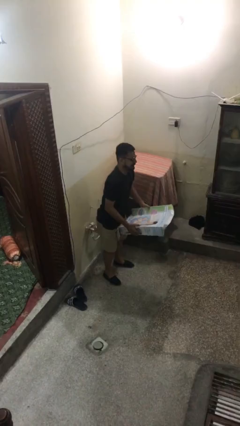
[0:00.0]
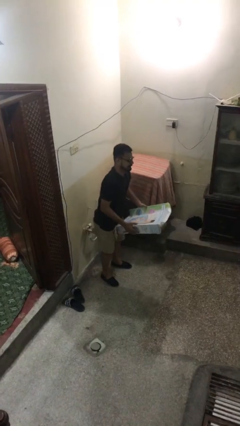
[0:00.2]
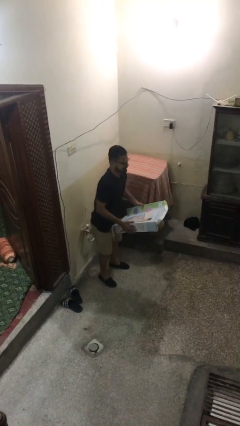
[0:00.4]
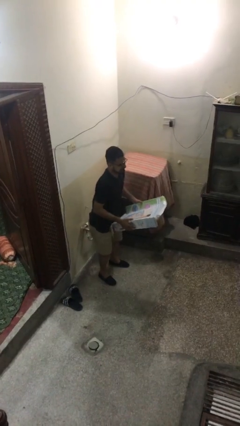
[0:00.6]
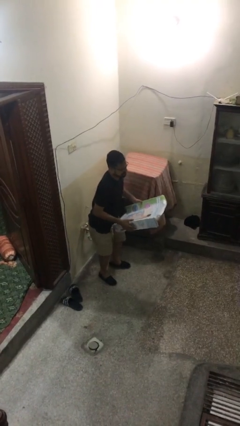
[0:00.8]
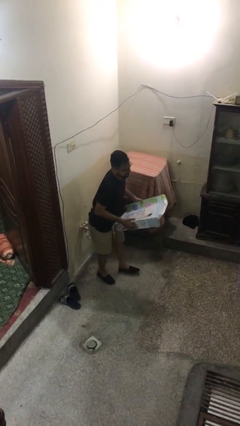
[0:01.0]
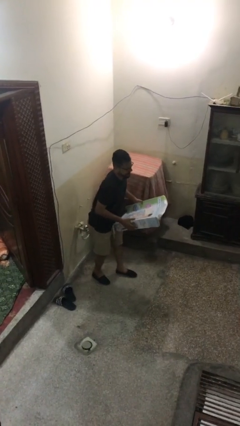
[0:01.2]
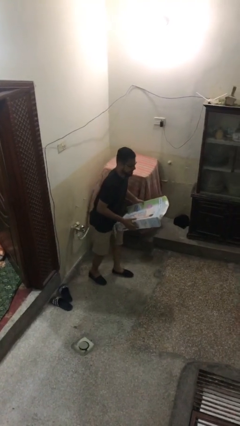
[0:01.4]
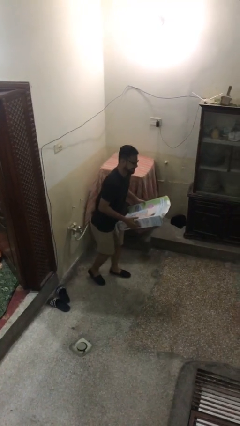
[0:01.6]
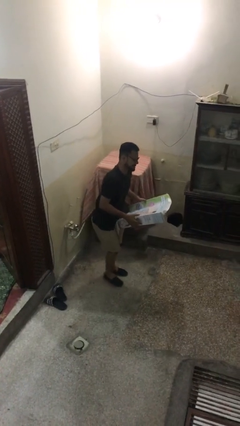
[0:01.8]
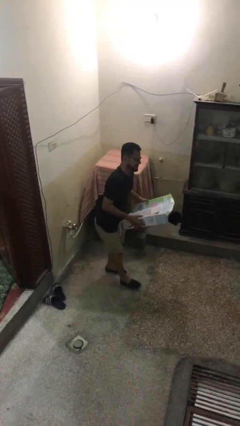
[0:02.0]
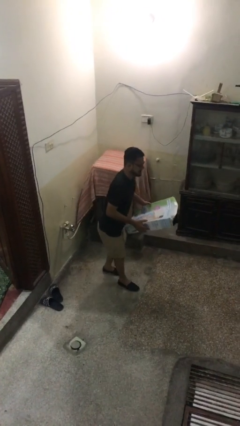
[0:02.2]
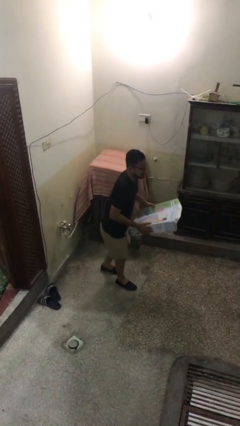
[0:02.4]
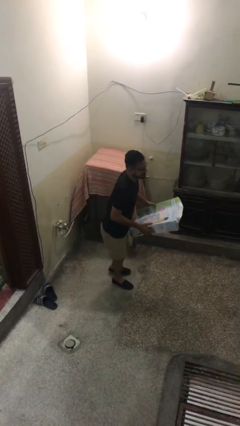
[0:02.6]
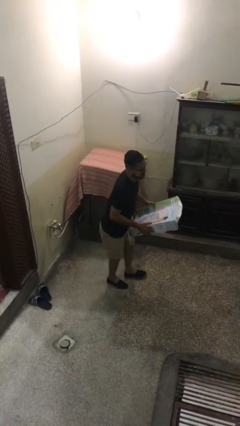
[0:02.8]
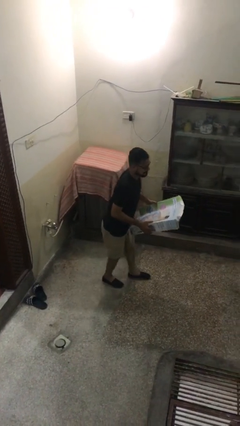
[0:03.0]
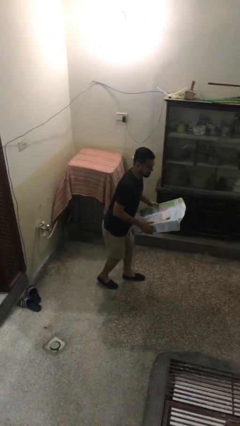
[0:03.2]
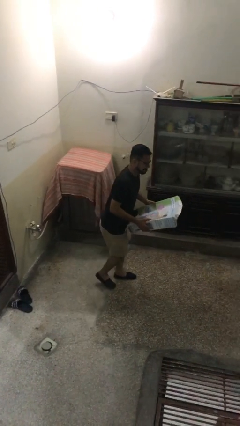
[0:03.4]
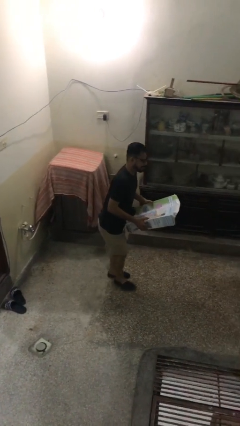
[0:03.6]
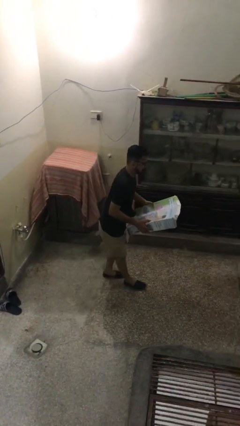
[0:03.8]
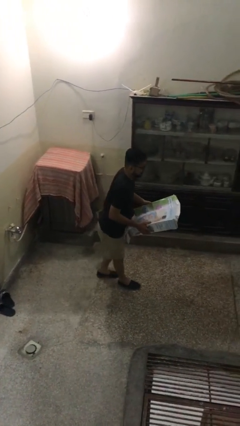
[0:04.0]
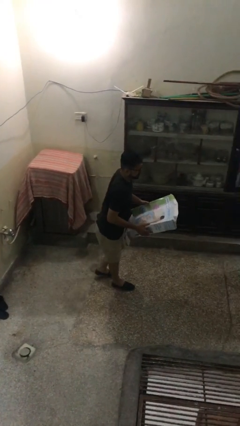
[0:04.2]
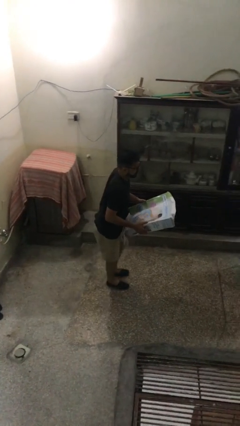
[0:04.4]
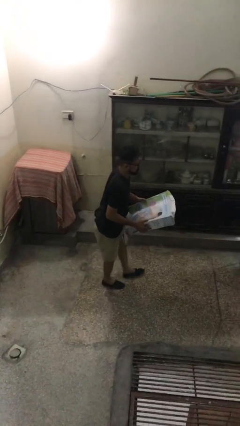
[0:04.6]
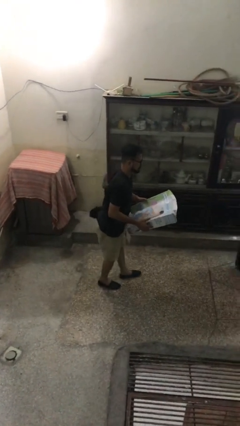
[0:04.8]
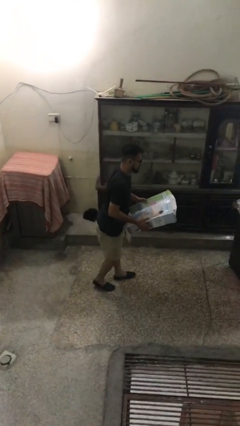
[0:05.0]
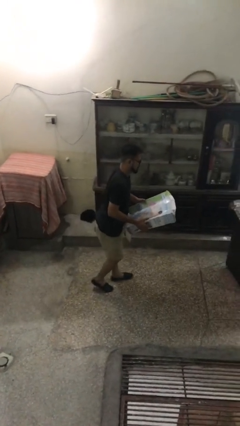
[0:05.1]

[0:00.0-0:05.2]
person carries heavy object

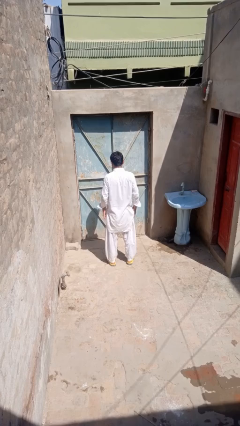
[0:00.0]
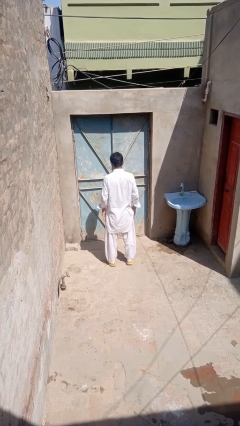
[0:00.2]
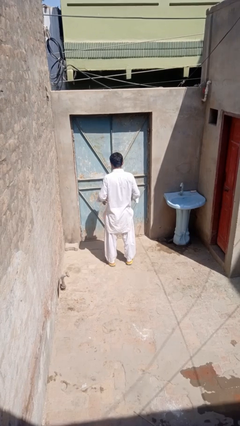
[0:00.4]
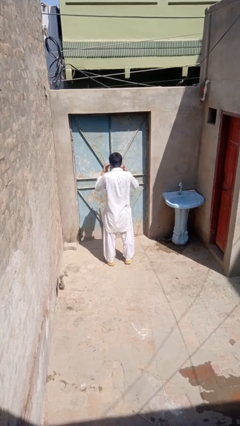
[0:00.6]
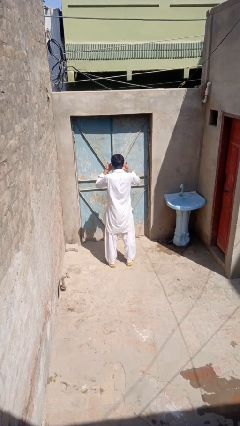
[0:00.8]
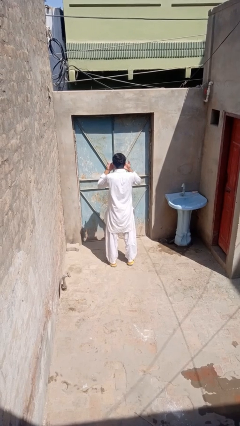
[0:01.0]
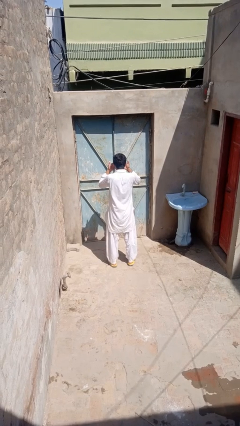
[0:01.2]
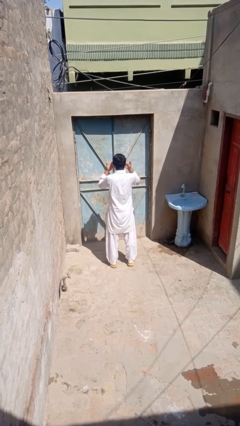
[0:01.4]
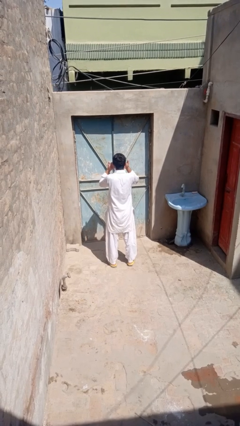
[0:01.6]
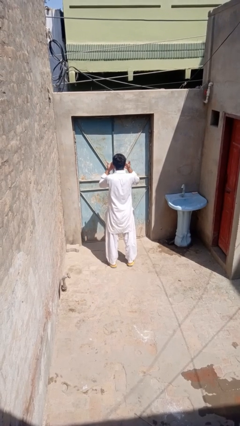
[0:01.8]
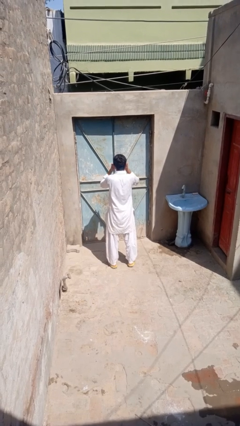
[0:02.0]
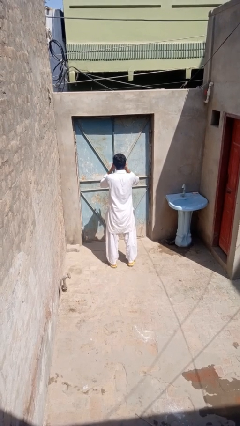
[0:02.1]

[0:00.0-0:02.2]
person rubs eyes

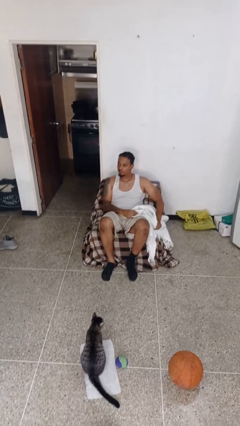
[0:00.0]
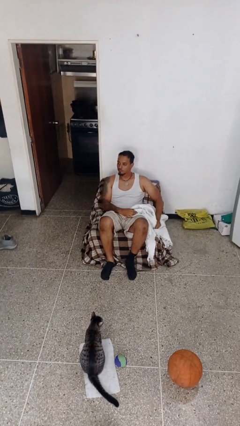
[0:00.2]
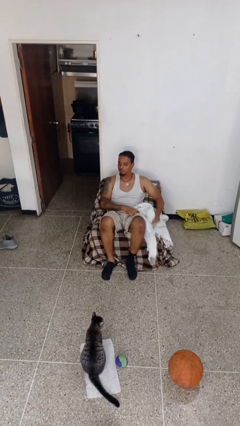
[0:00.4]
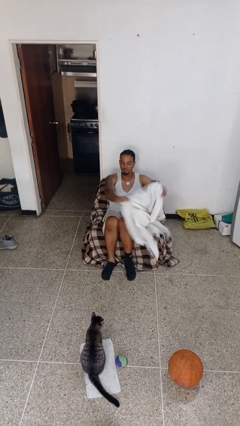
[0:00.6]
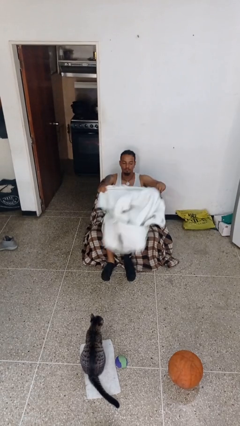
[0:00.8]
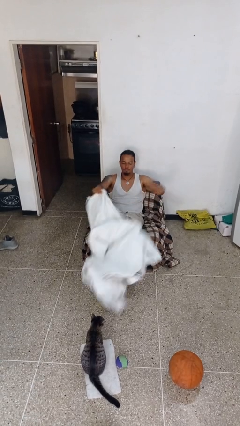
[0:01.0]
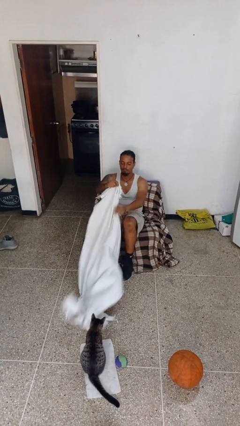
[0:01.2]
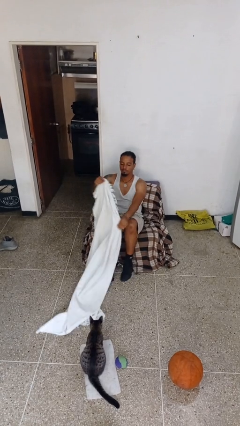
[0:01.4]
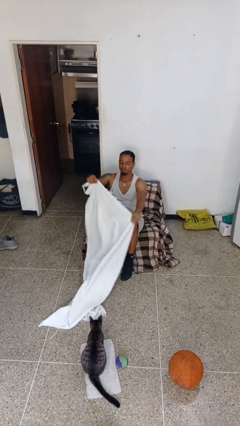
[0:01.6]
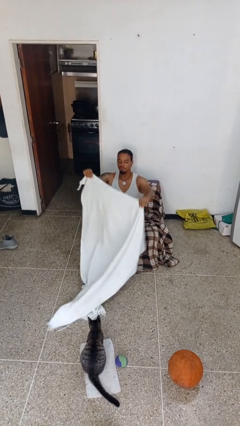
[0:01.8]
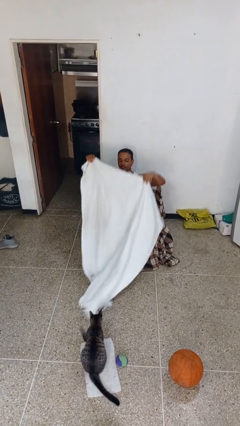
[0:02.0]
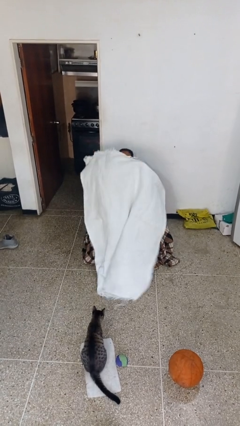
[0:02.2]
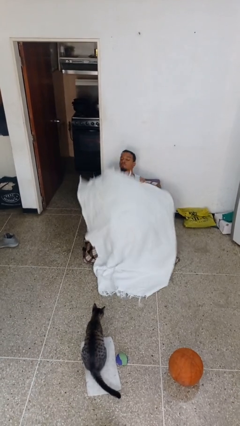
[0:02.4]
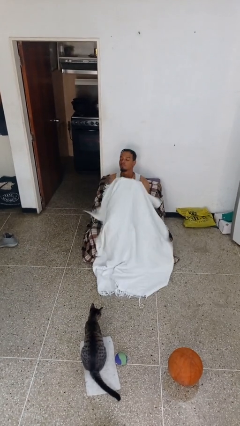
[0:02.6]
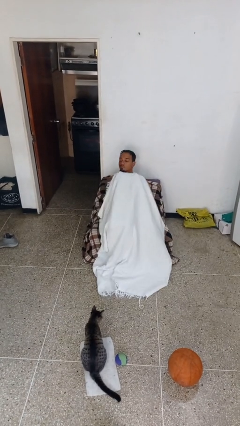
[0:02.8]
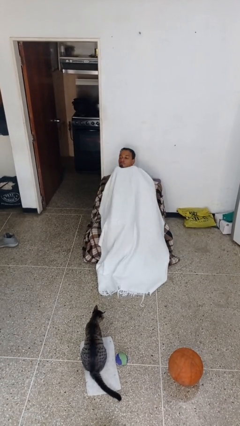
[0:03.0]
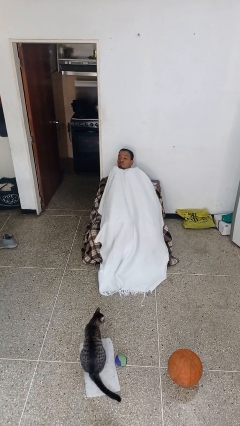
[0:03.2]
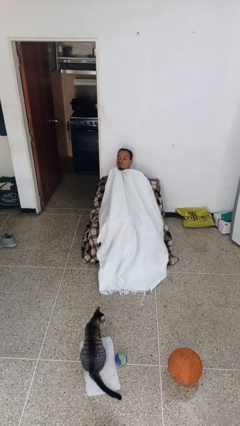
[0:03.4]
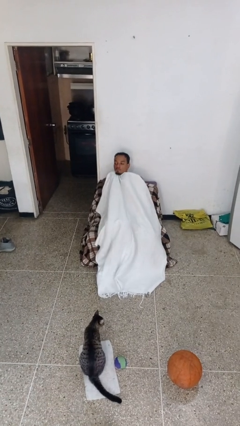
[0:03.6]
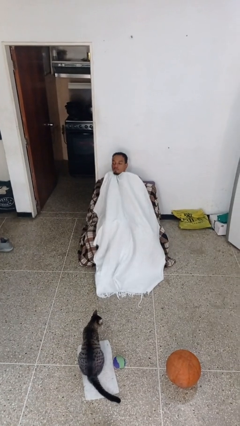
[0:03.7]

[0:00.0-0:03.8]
person covers with blanket

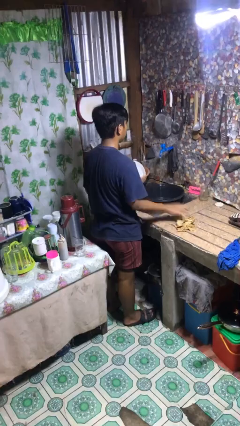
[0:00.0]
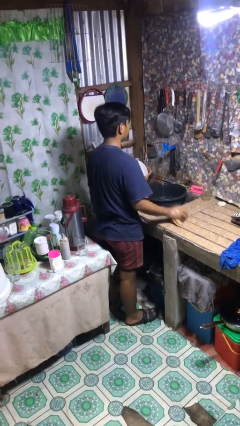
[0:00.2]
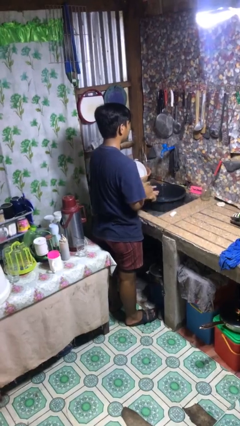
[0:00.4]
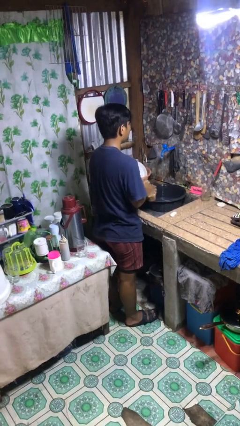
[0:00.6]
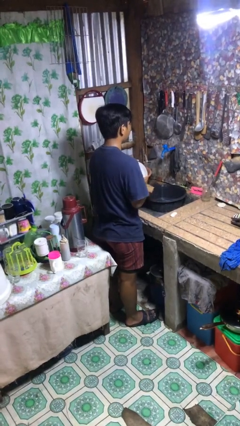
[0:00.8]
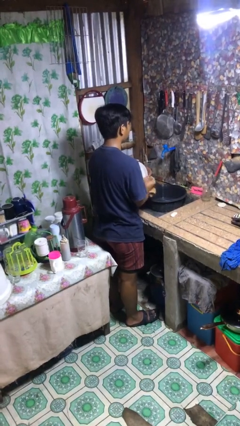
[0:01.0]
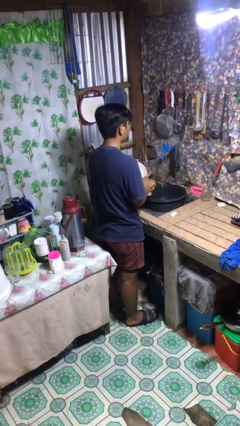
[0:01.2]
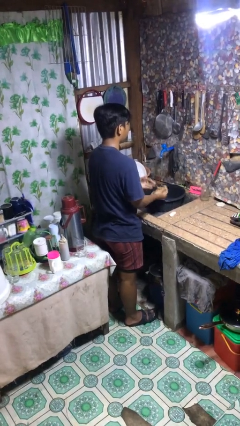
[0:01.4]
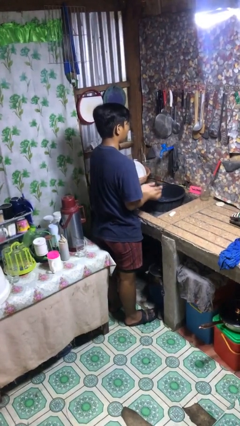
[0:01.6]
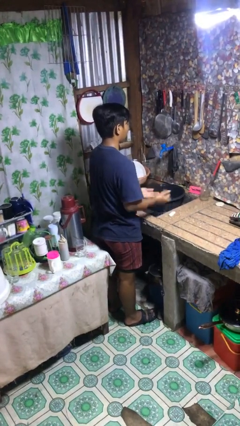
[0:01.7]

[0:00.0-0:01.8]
person dries hands with towel

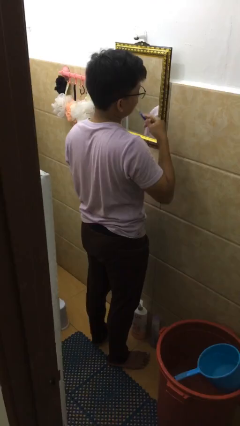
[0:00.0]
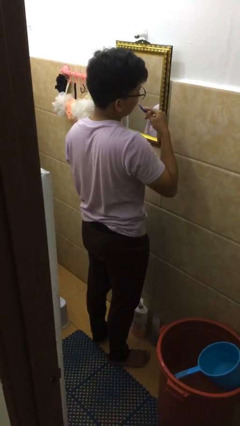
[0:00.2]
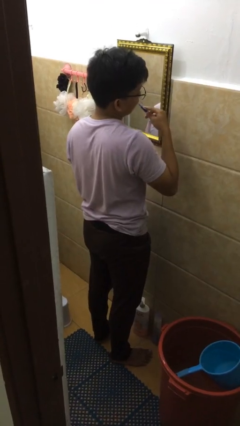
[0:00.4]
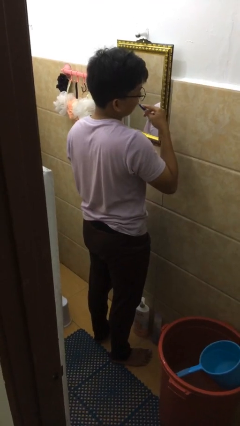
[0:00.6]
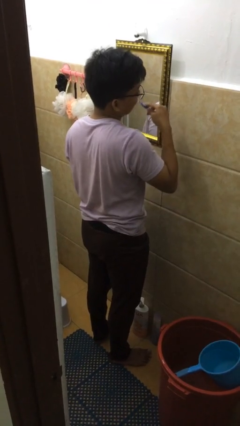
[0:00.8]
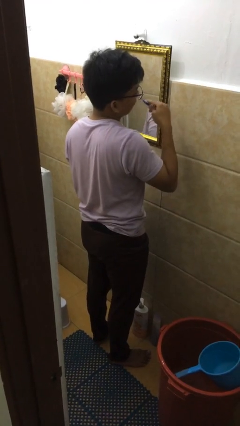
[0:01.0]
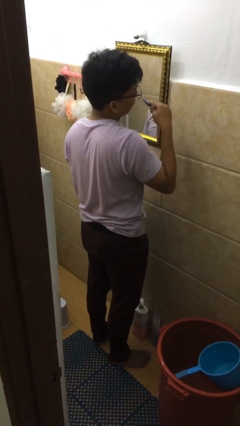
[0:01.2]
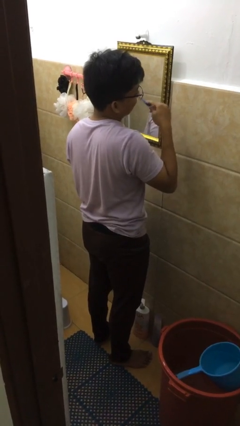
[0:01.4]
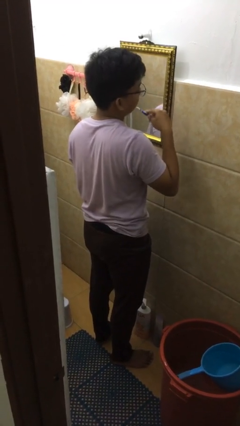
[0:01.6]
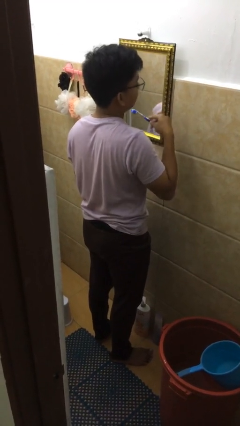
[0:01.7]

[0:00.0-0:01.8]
person brushes teeth

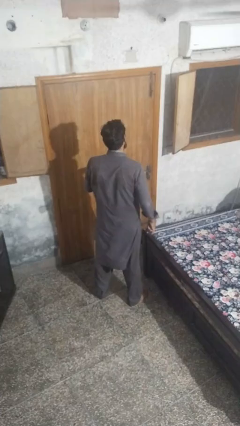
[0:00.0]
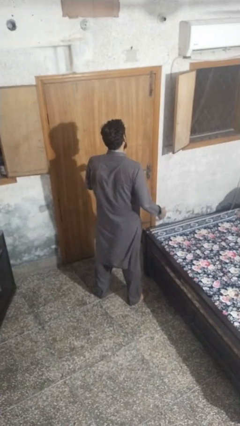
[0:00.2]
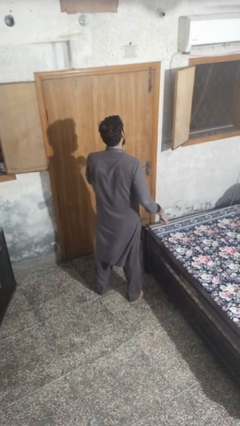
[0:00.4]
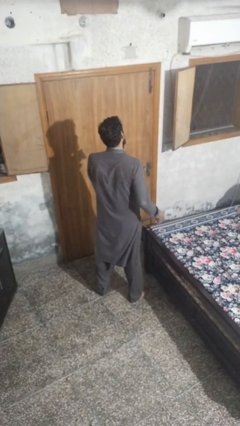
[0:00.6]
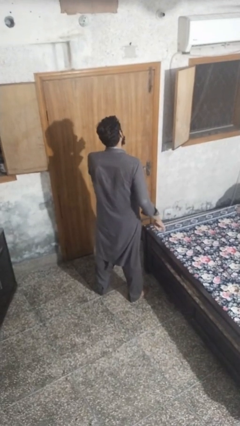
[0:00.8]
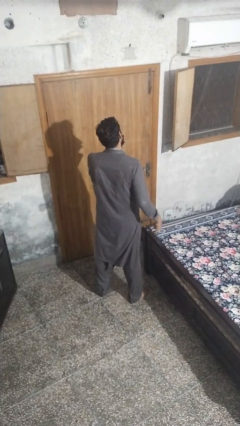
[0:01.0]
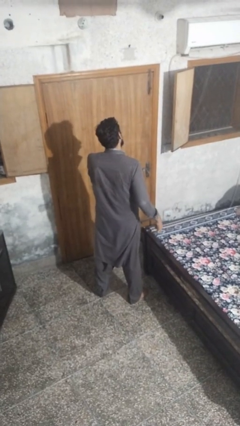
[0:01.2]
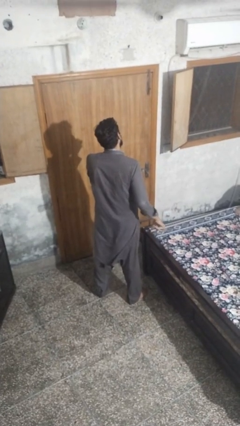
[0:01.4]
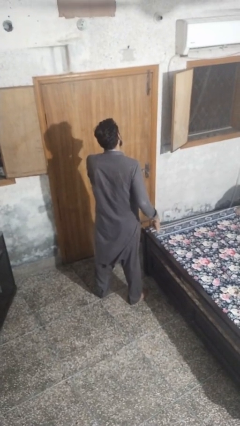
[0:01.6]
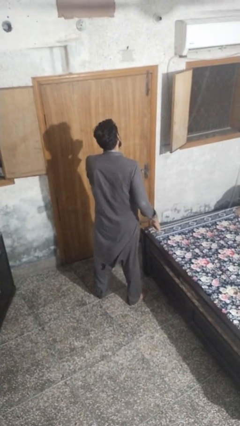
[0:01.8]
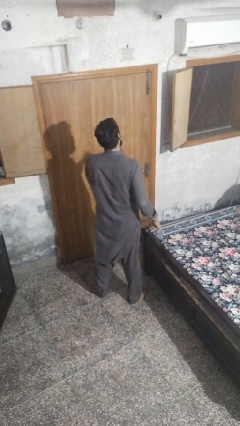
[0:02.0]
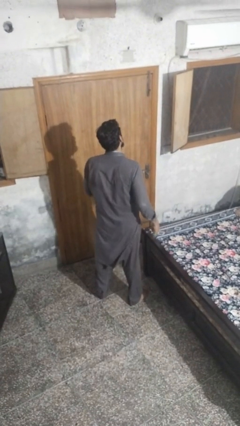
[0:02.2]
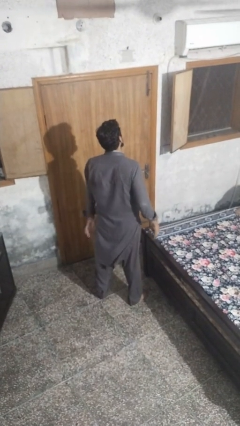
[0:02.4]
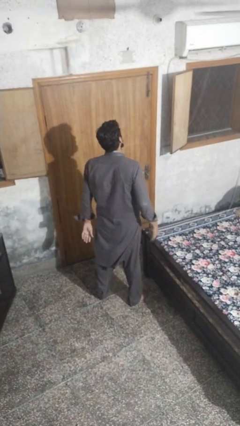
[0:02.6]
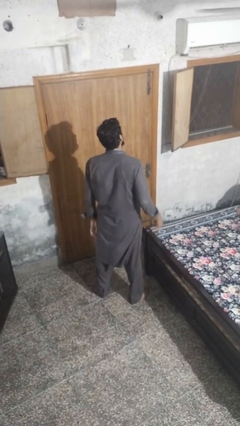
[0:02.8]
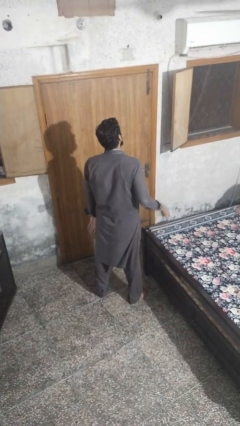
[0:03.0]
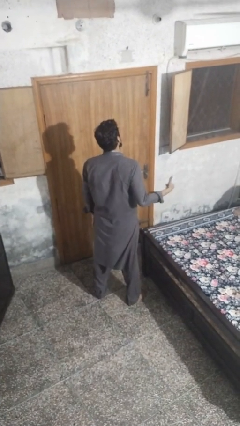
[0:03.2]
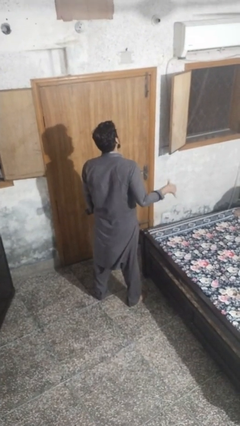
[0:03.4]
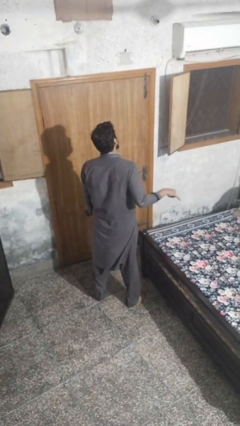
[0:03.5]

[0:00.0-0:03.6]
person gestures hang loose
